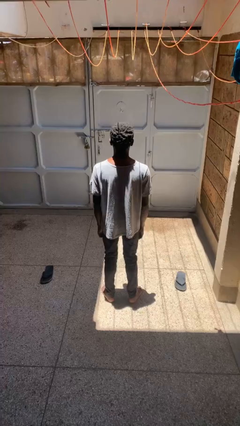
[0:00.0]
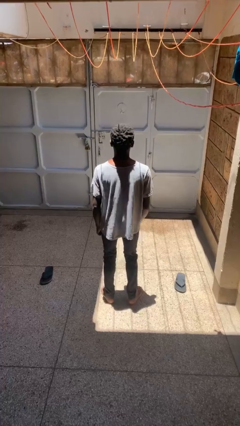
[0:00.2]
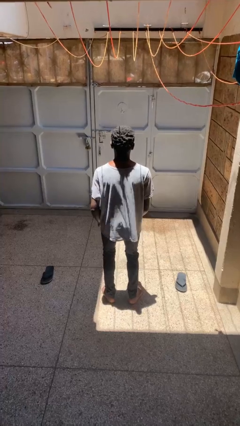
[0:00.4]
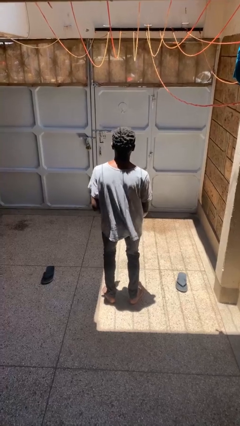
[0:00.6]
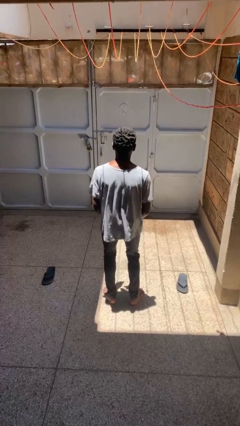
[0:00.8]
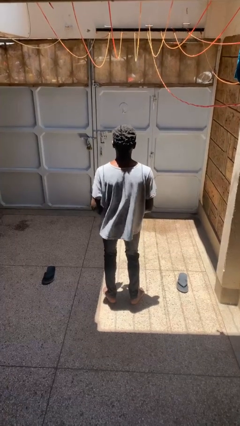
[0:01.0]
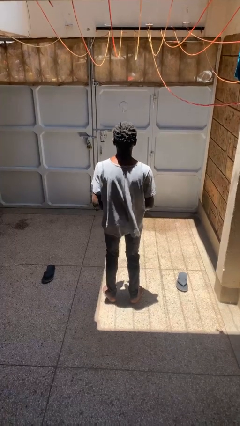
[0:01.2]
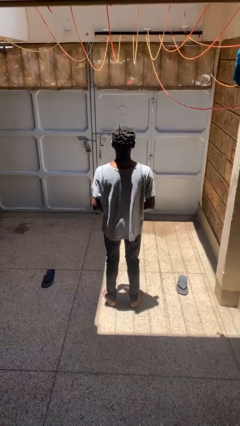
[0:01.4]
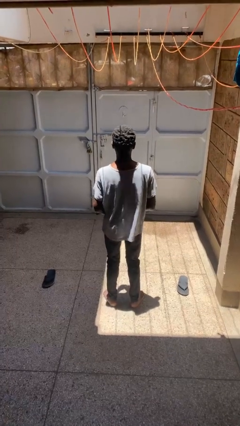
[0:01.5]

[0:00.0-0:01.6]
person dances in place

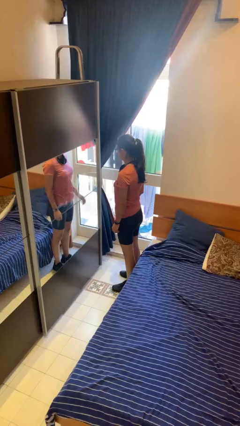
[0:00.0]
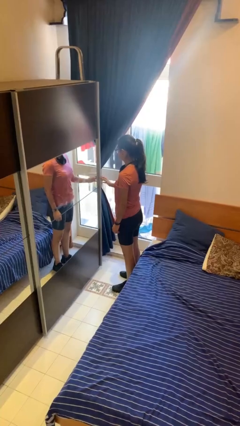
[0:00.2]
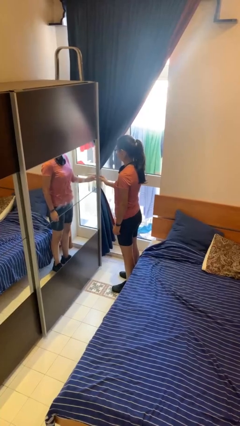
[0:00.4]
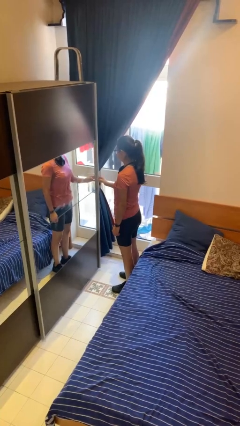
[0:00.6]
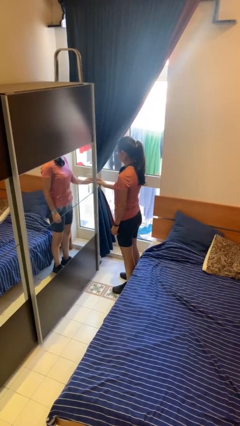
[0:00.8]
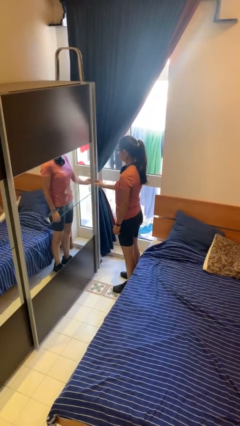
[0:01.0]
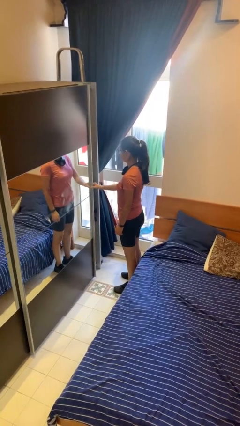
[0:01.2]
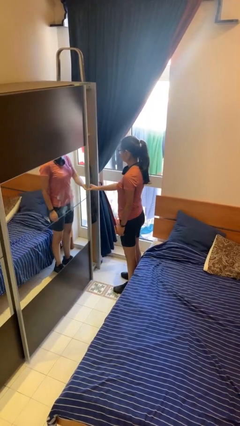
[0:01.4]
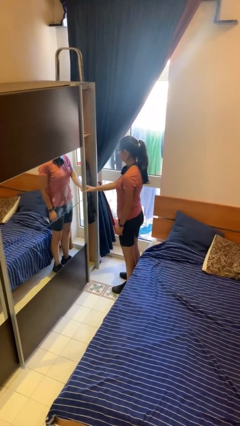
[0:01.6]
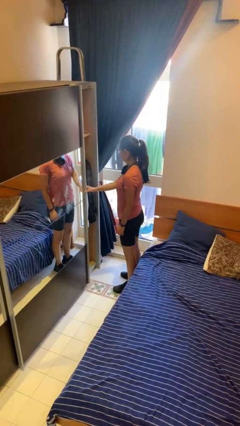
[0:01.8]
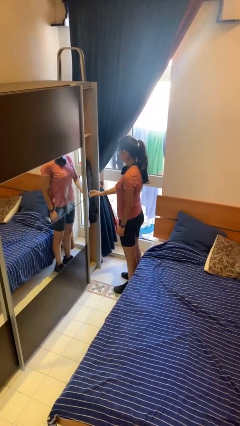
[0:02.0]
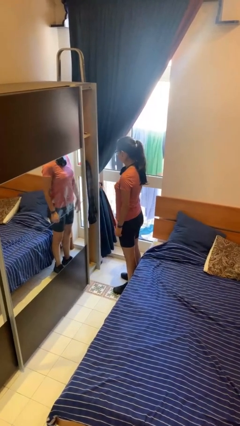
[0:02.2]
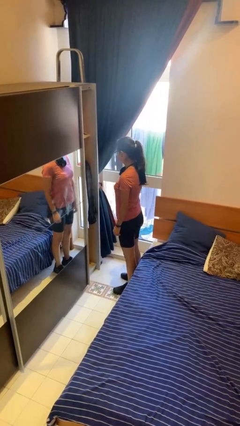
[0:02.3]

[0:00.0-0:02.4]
person opens closet door

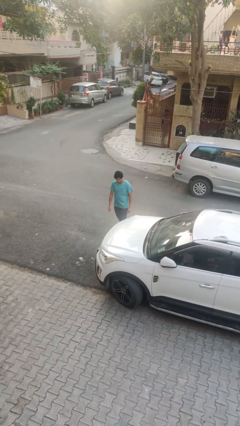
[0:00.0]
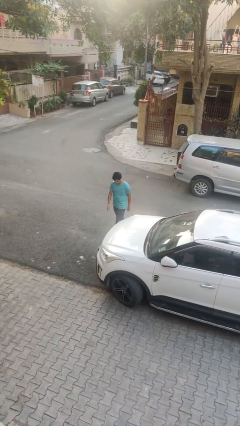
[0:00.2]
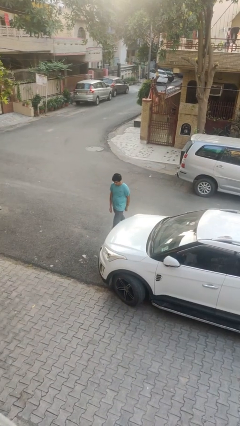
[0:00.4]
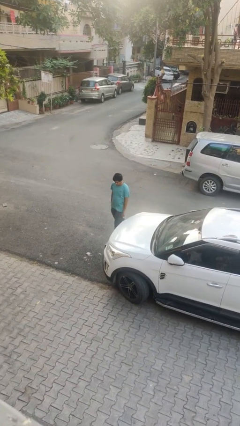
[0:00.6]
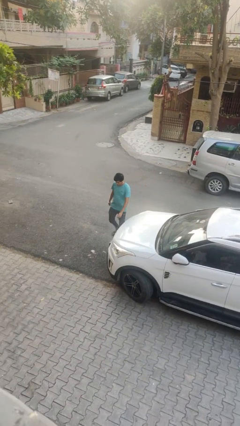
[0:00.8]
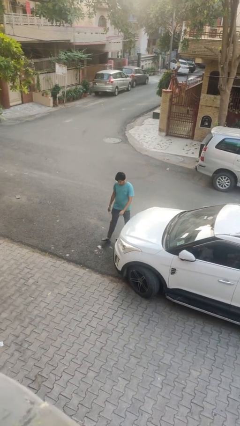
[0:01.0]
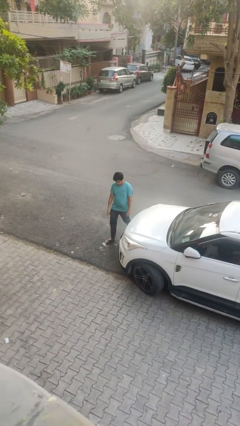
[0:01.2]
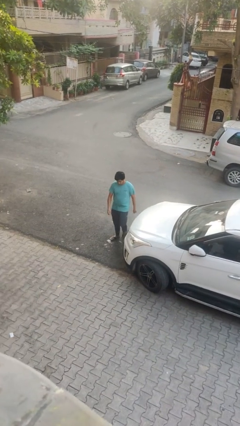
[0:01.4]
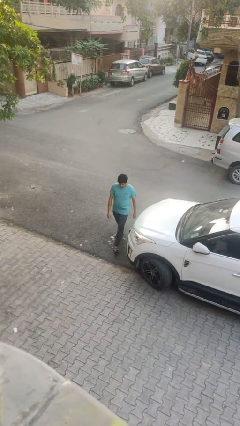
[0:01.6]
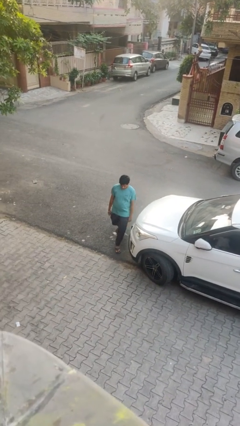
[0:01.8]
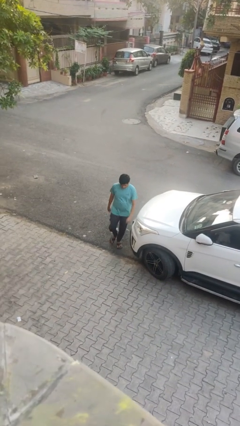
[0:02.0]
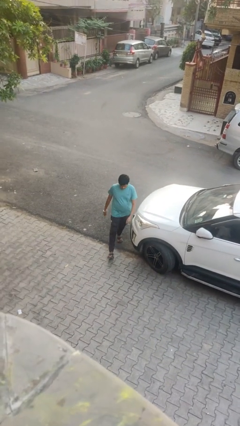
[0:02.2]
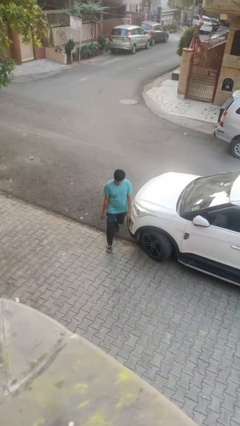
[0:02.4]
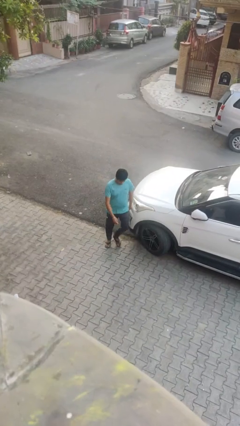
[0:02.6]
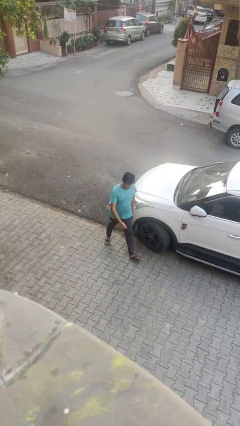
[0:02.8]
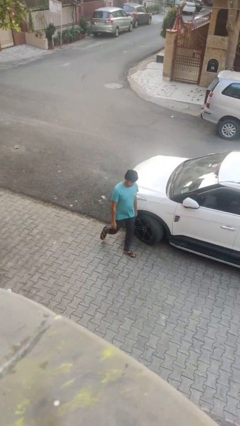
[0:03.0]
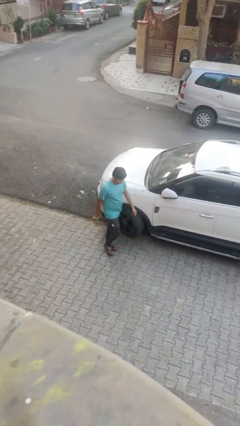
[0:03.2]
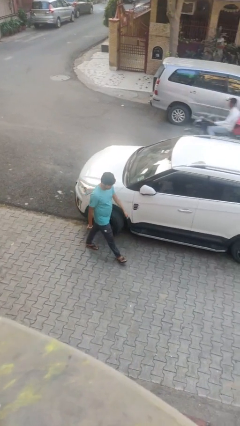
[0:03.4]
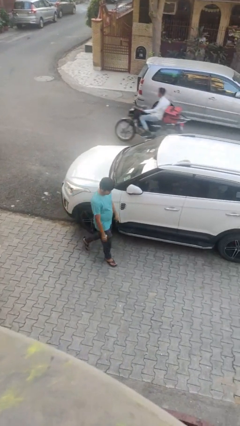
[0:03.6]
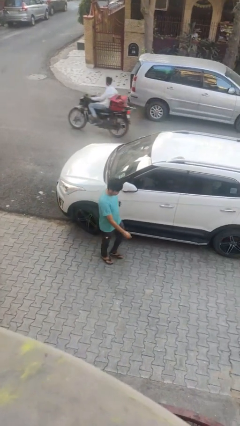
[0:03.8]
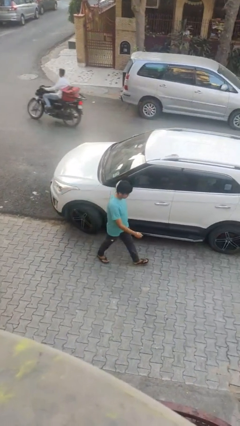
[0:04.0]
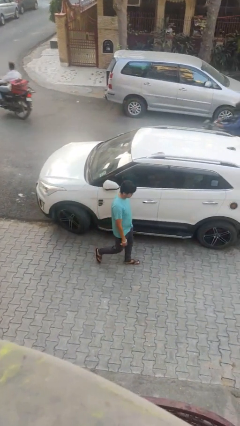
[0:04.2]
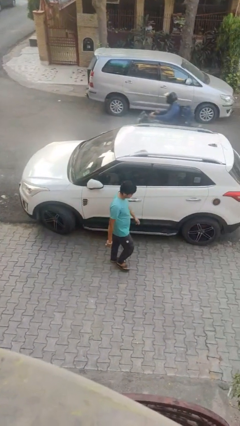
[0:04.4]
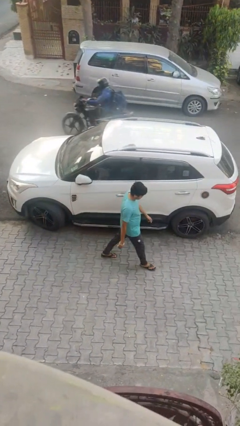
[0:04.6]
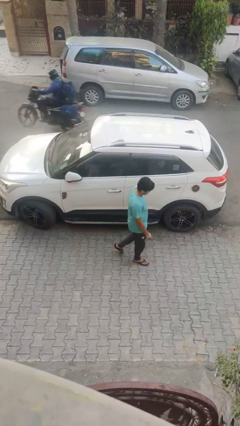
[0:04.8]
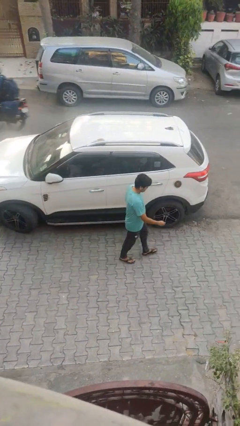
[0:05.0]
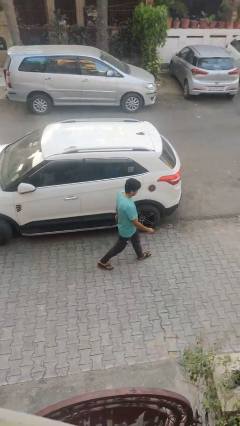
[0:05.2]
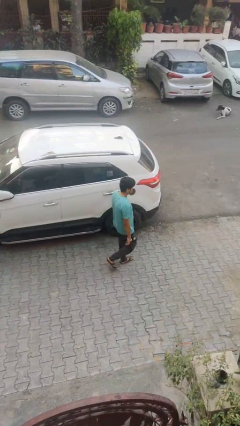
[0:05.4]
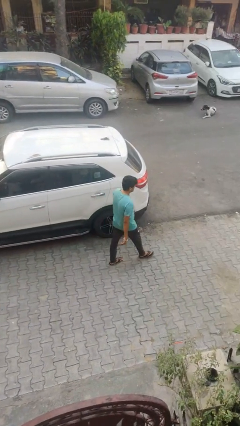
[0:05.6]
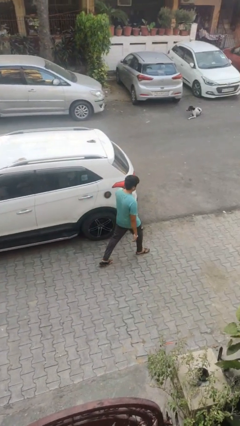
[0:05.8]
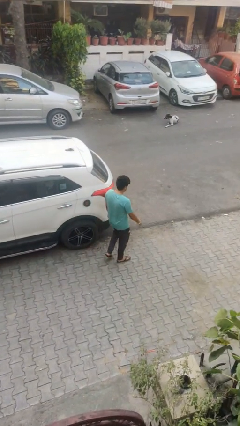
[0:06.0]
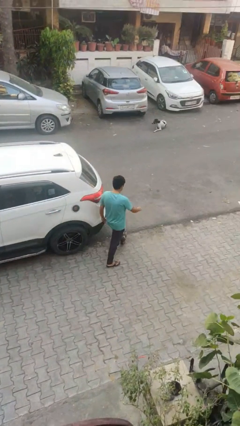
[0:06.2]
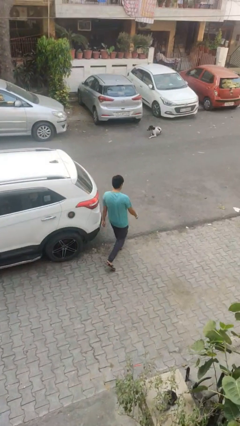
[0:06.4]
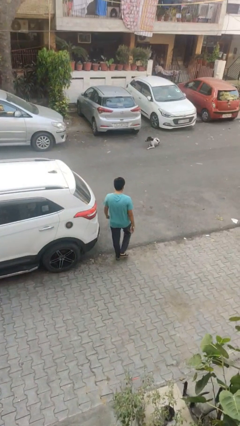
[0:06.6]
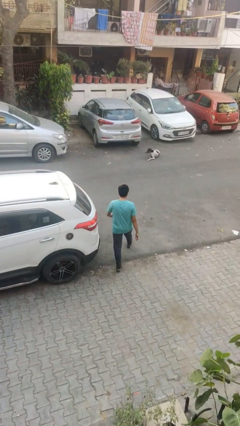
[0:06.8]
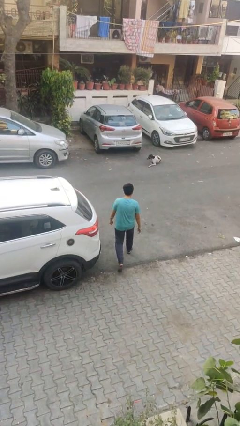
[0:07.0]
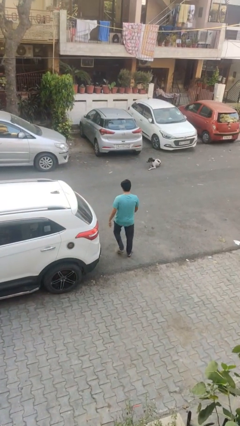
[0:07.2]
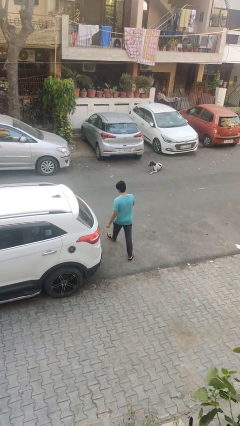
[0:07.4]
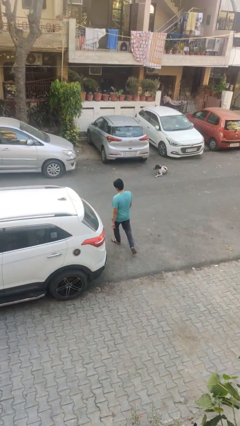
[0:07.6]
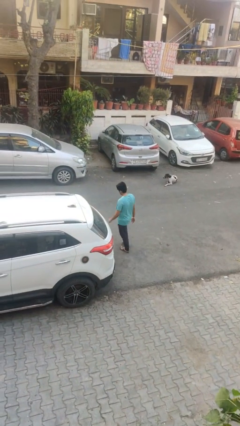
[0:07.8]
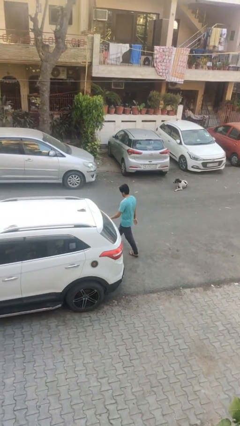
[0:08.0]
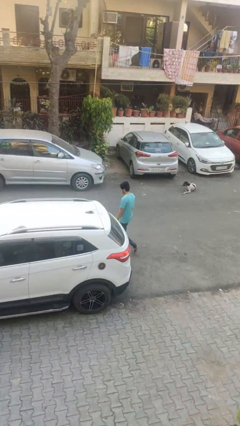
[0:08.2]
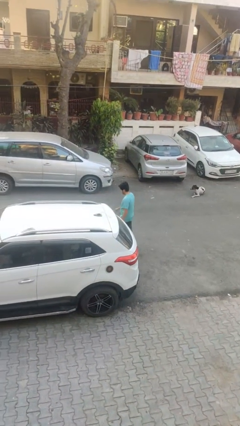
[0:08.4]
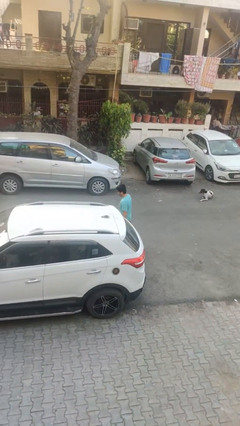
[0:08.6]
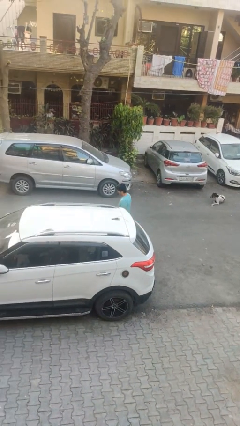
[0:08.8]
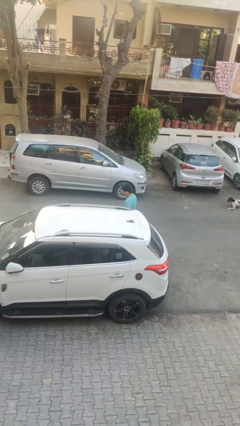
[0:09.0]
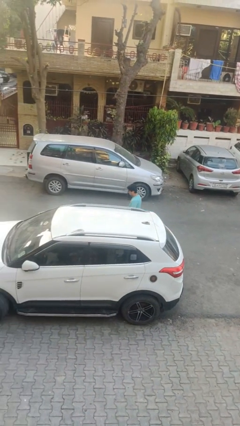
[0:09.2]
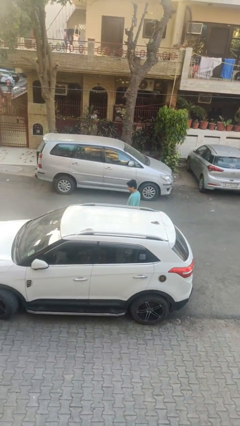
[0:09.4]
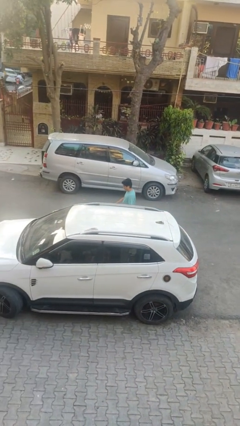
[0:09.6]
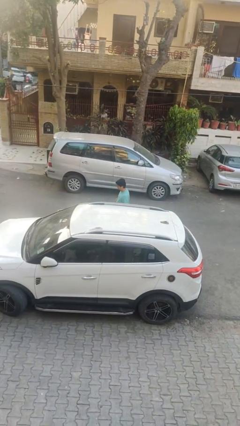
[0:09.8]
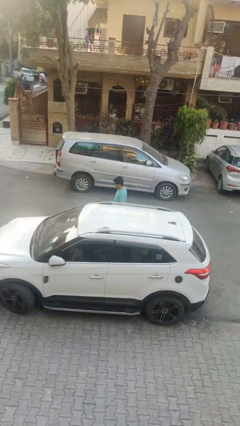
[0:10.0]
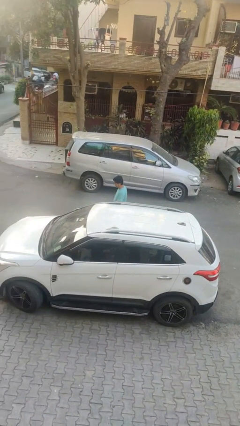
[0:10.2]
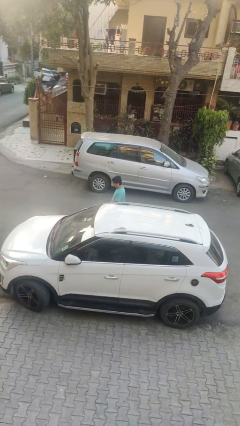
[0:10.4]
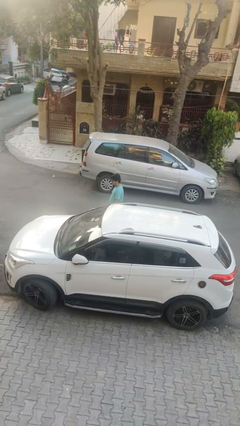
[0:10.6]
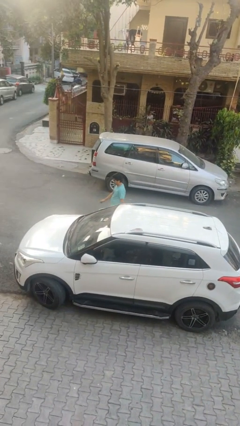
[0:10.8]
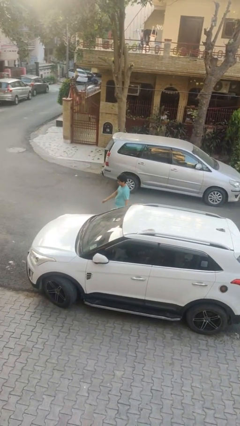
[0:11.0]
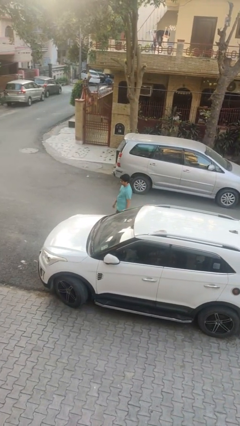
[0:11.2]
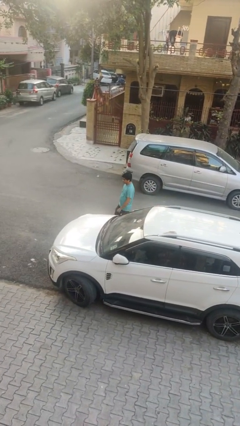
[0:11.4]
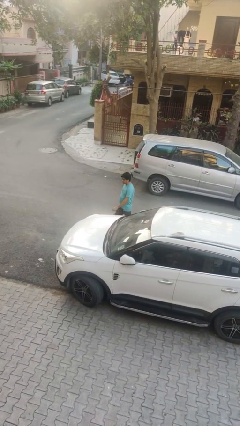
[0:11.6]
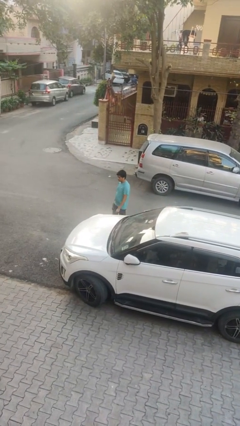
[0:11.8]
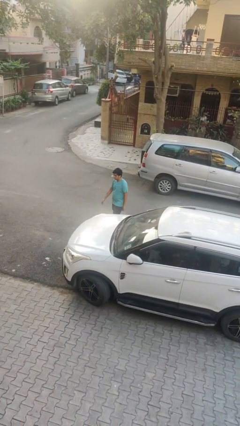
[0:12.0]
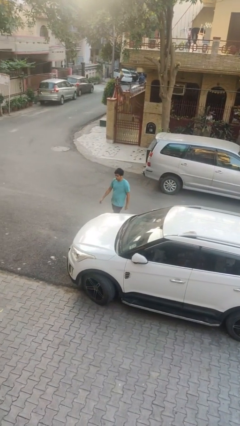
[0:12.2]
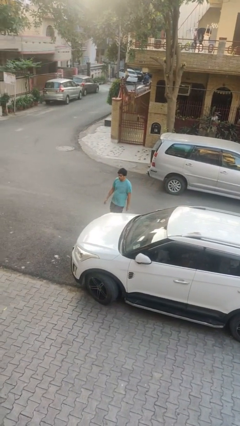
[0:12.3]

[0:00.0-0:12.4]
person walks around car

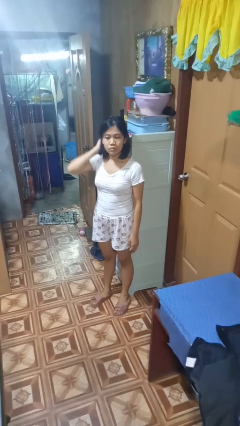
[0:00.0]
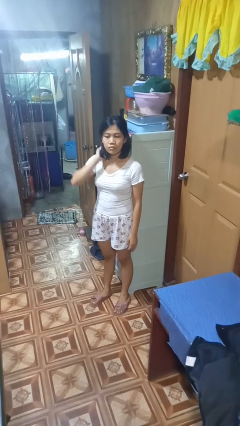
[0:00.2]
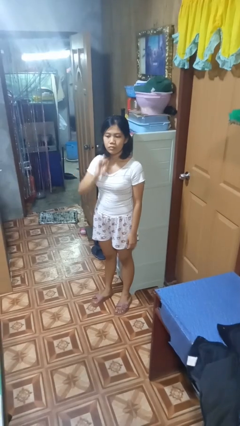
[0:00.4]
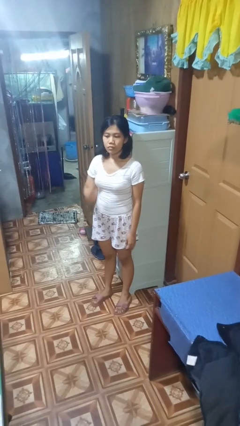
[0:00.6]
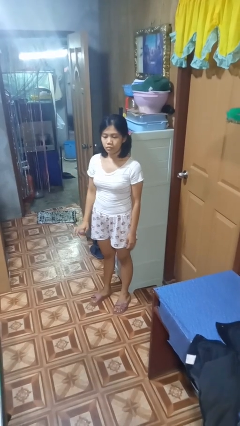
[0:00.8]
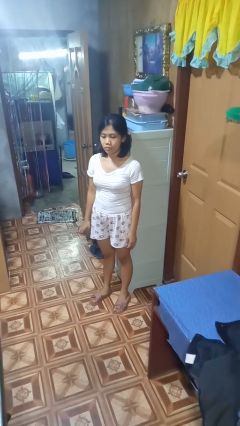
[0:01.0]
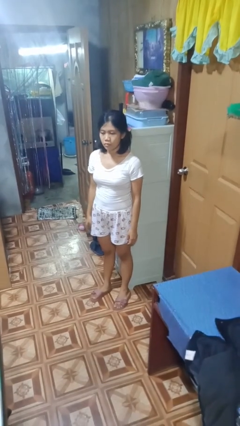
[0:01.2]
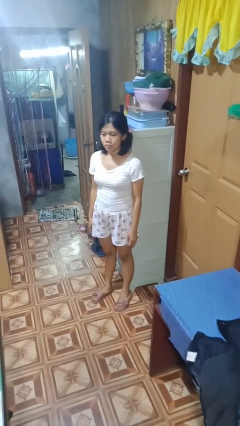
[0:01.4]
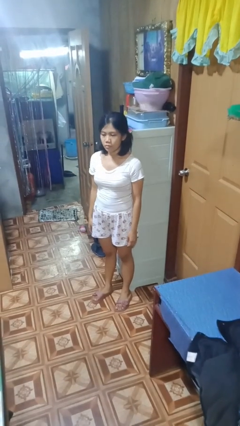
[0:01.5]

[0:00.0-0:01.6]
person strokes hair
